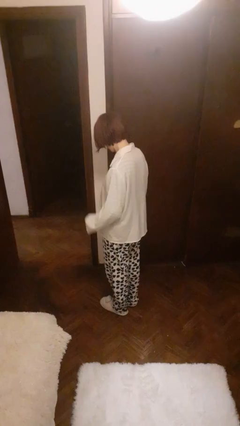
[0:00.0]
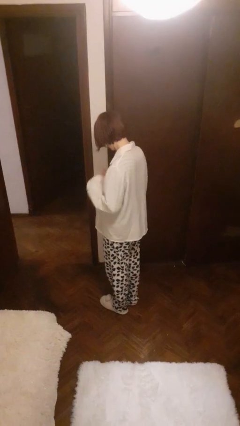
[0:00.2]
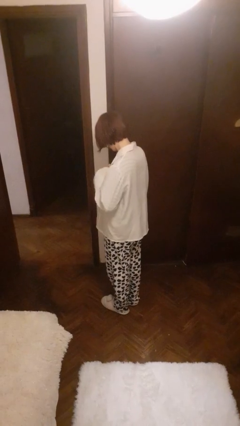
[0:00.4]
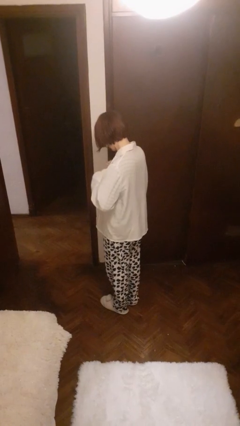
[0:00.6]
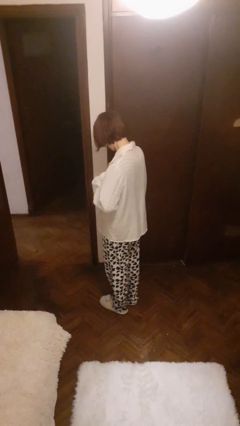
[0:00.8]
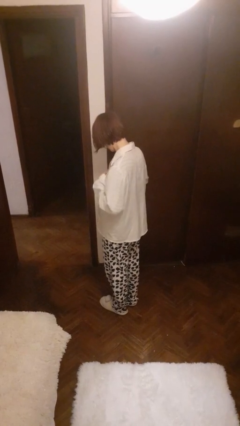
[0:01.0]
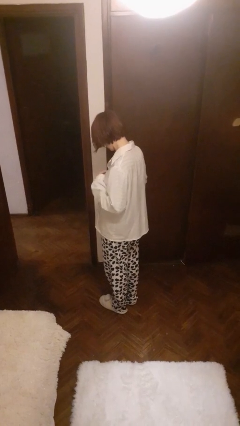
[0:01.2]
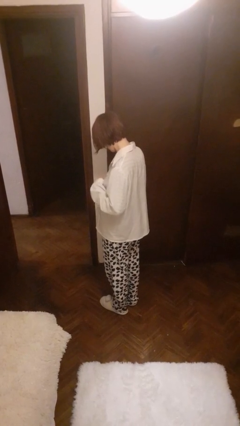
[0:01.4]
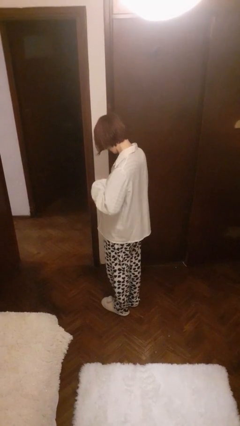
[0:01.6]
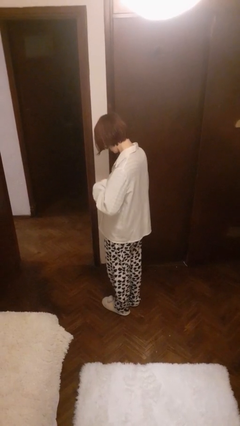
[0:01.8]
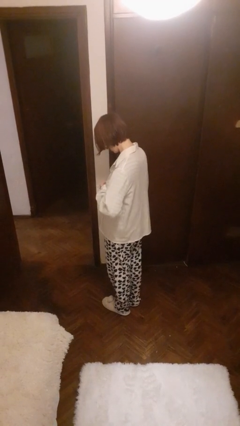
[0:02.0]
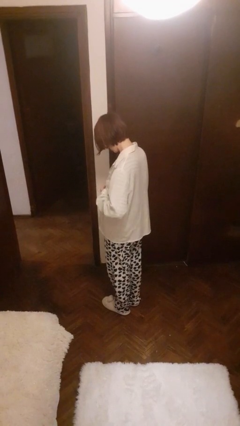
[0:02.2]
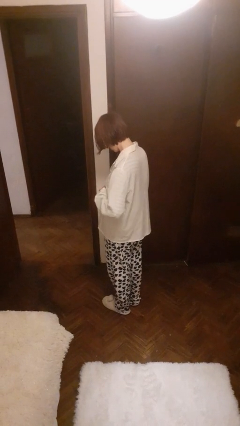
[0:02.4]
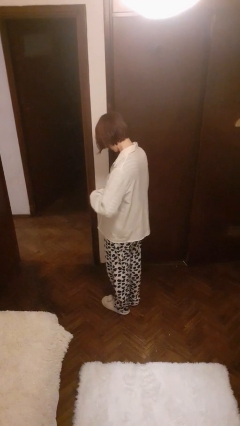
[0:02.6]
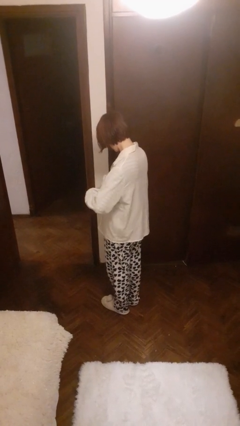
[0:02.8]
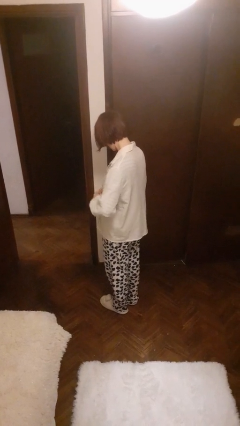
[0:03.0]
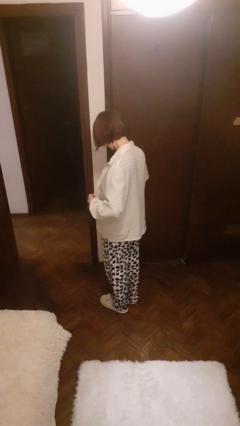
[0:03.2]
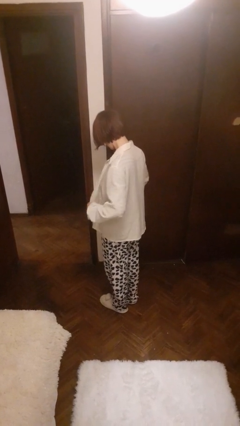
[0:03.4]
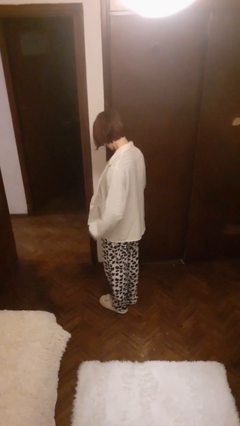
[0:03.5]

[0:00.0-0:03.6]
person unbuttons shirt

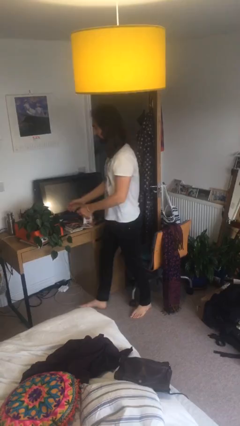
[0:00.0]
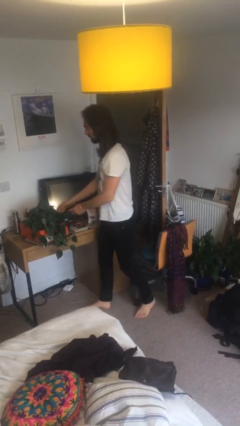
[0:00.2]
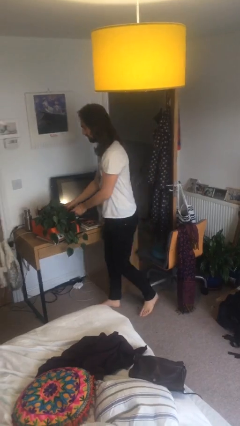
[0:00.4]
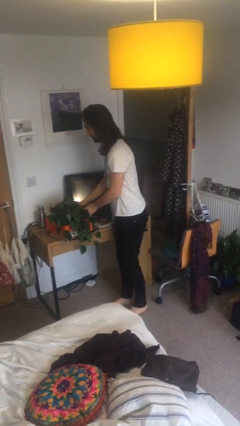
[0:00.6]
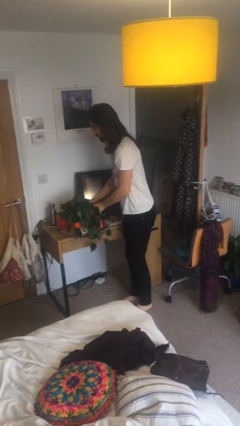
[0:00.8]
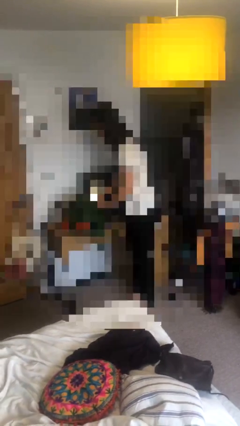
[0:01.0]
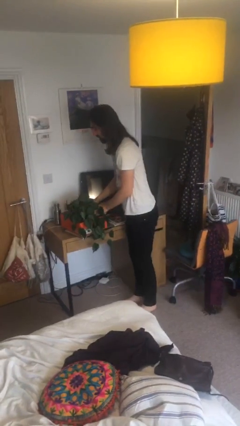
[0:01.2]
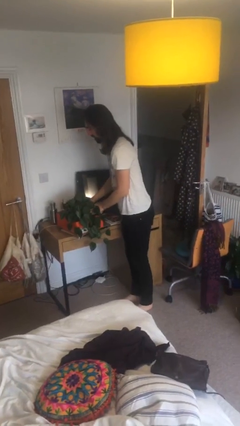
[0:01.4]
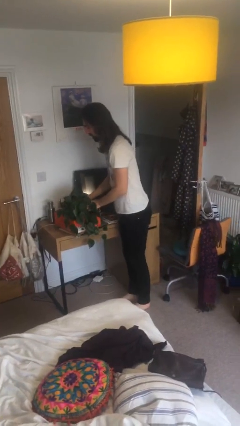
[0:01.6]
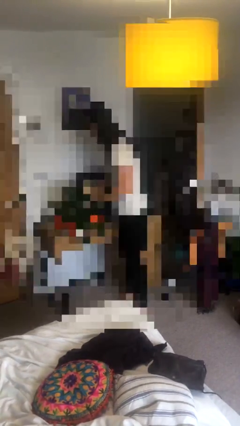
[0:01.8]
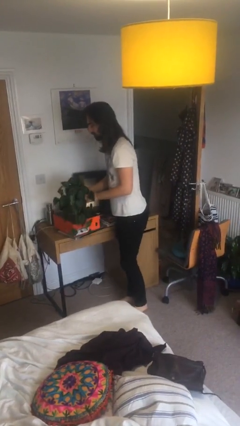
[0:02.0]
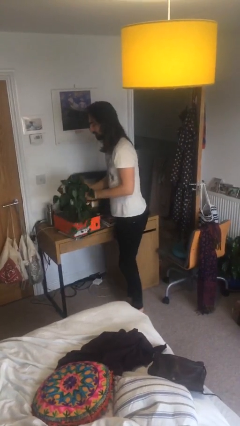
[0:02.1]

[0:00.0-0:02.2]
person picks up object from table

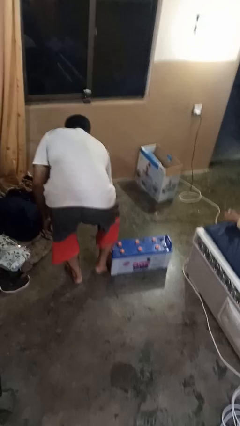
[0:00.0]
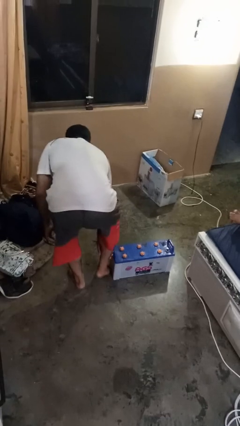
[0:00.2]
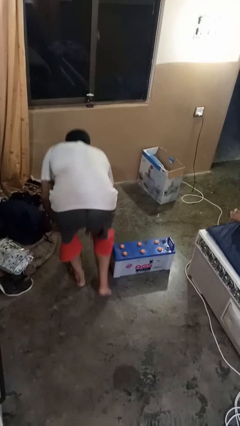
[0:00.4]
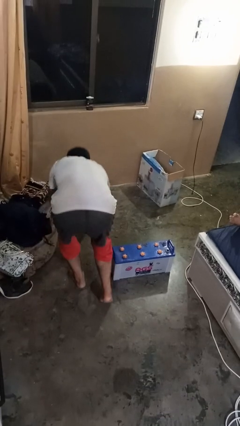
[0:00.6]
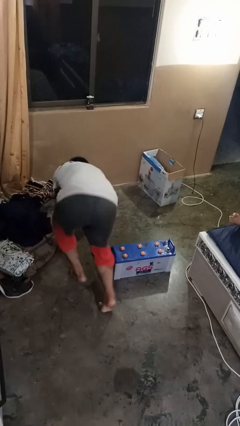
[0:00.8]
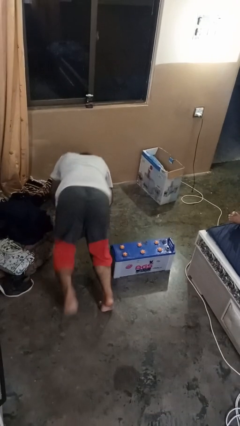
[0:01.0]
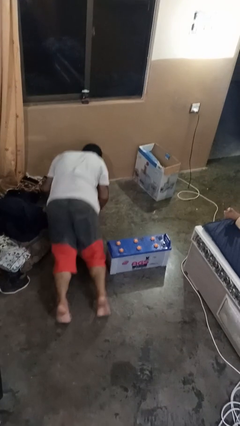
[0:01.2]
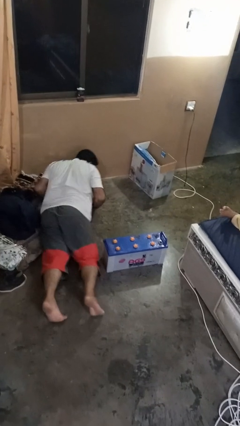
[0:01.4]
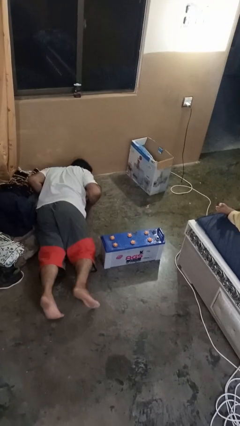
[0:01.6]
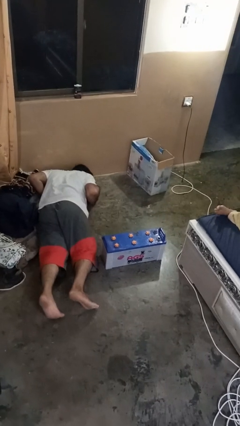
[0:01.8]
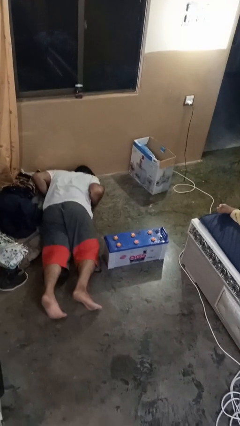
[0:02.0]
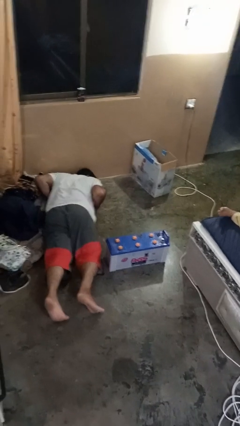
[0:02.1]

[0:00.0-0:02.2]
person lies down on floor

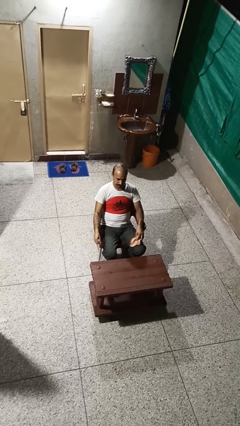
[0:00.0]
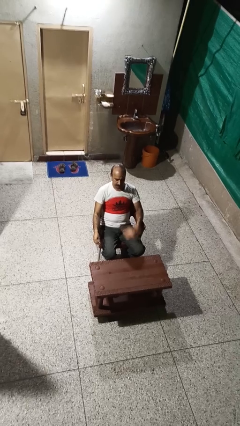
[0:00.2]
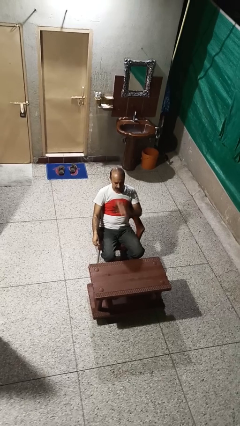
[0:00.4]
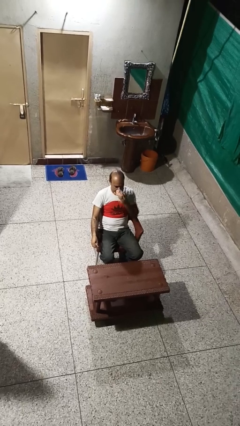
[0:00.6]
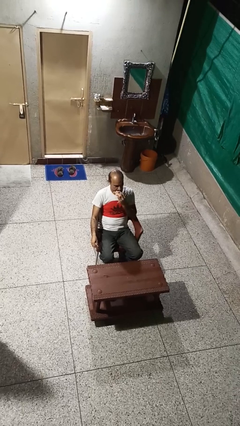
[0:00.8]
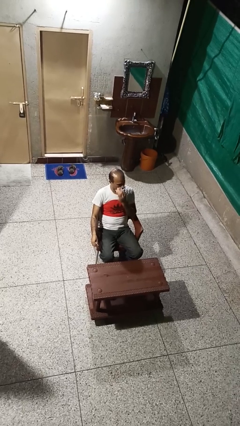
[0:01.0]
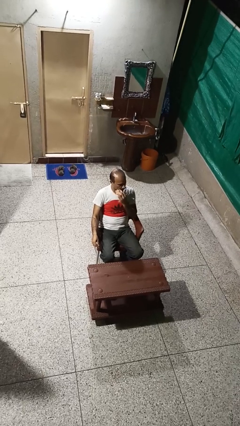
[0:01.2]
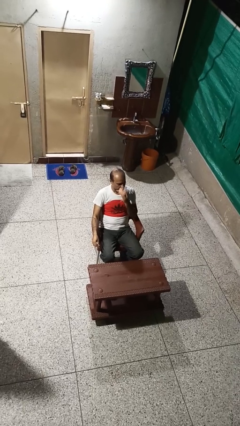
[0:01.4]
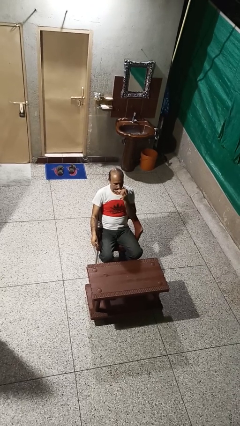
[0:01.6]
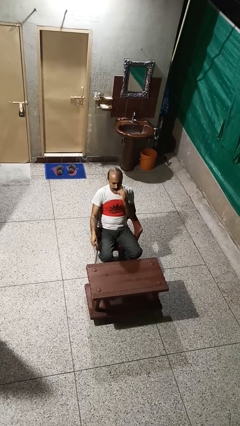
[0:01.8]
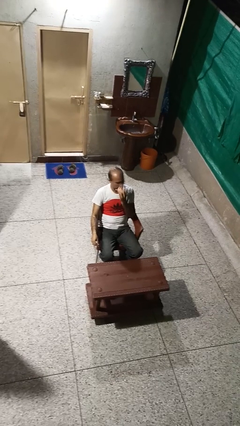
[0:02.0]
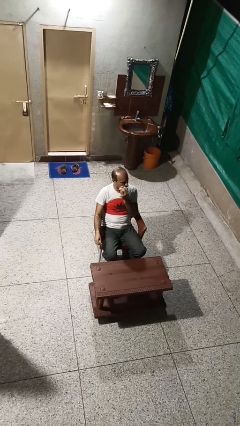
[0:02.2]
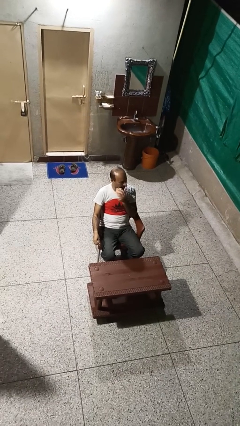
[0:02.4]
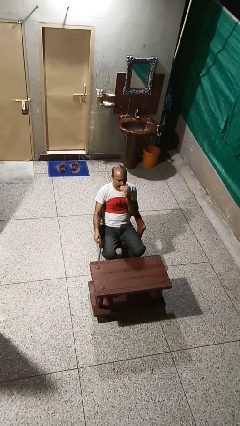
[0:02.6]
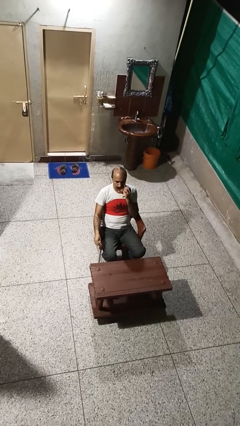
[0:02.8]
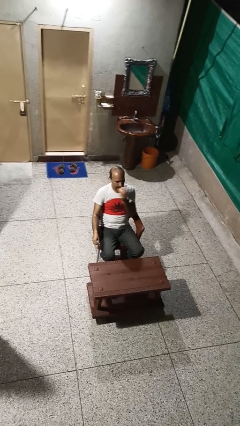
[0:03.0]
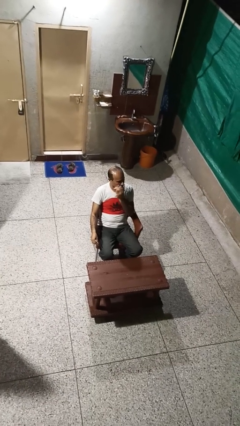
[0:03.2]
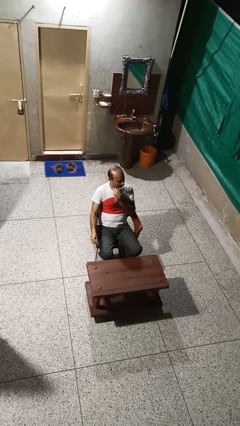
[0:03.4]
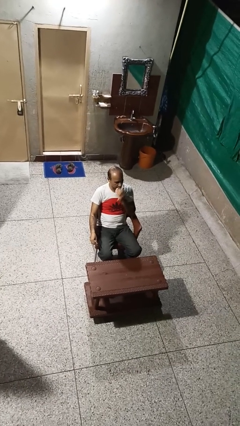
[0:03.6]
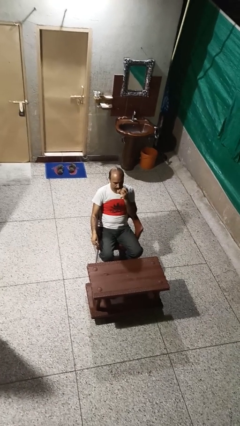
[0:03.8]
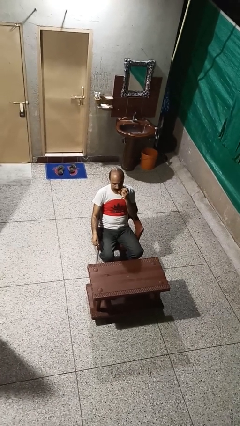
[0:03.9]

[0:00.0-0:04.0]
person wipes mouth with napkin

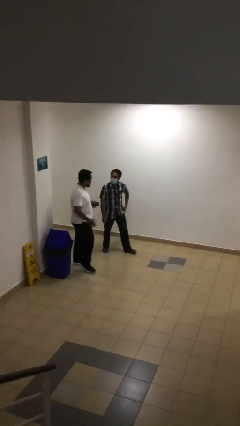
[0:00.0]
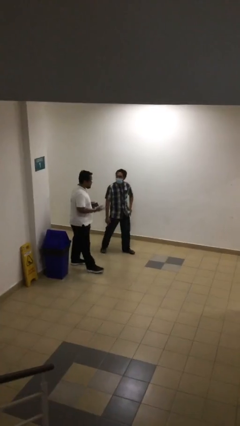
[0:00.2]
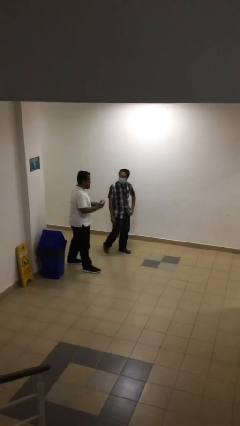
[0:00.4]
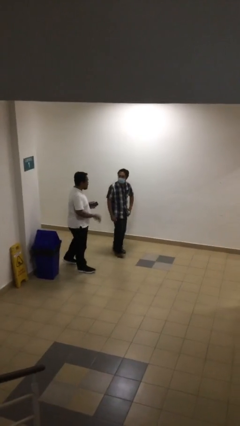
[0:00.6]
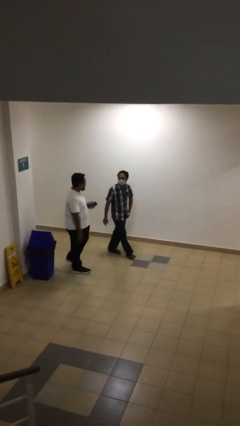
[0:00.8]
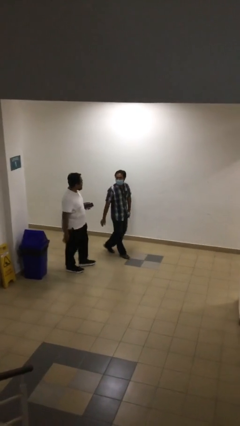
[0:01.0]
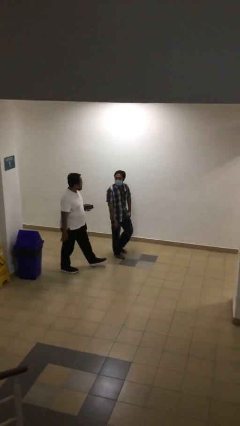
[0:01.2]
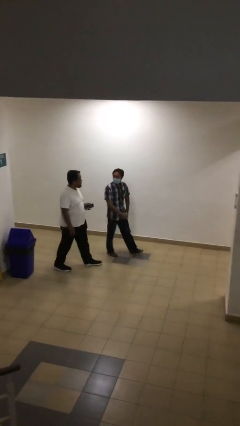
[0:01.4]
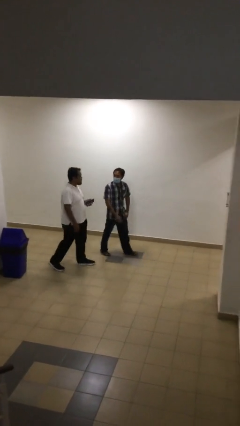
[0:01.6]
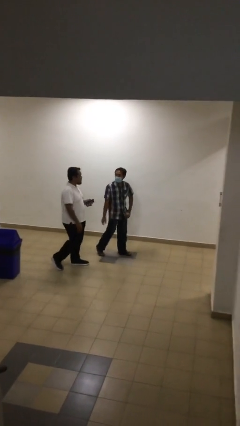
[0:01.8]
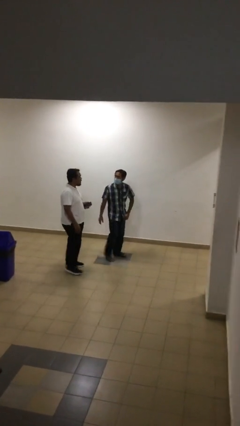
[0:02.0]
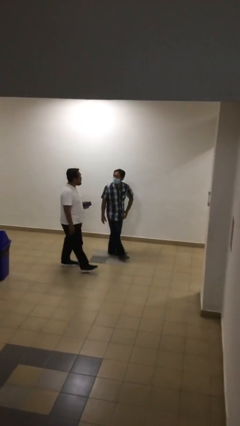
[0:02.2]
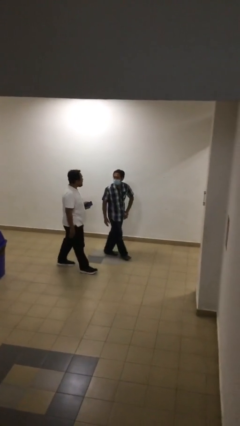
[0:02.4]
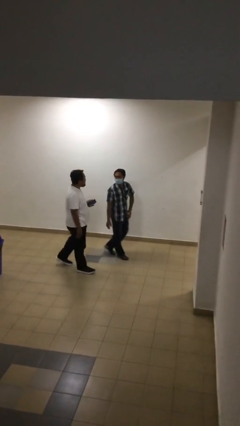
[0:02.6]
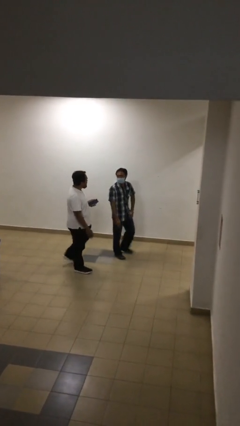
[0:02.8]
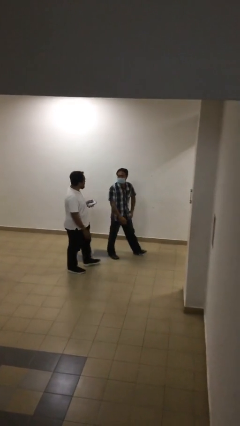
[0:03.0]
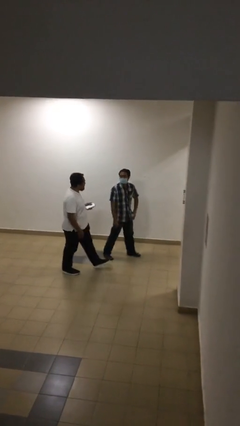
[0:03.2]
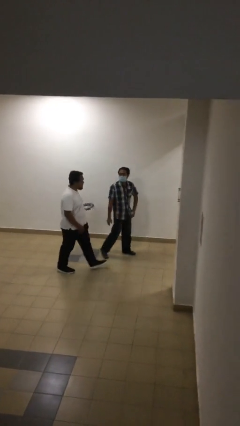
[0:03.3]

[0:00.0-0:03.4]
person talks to person

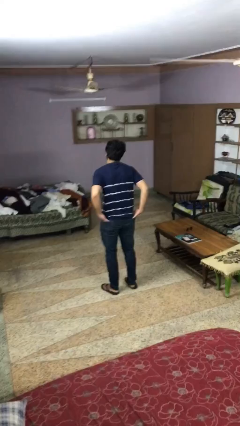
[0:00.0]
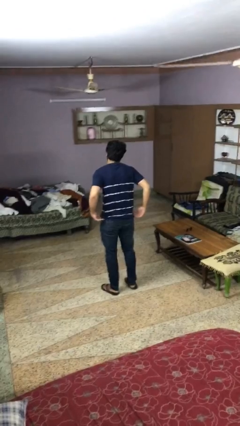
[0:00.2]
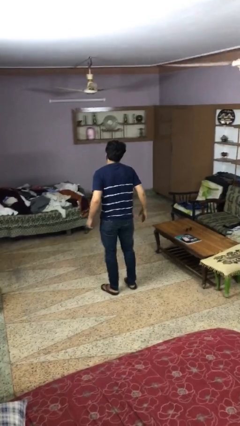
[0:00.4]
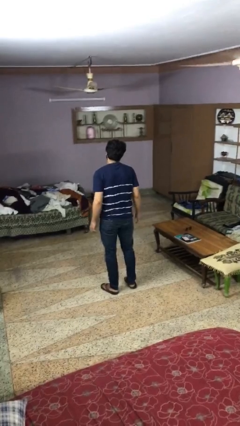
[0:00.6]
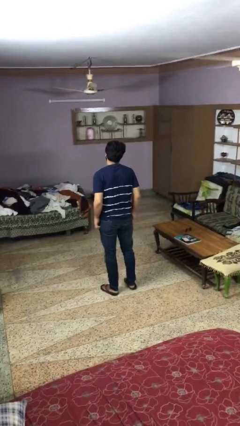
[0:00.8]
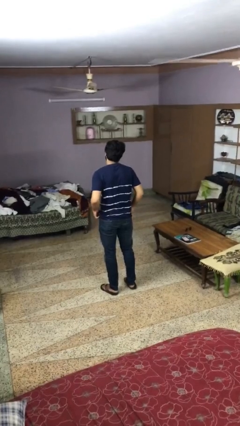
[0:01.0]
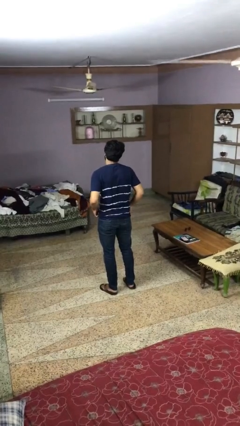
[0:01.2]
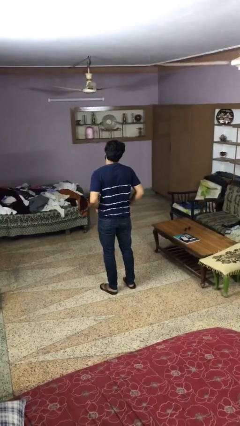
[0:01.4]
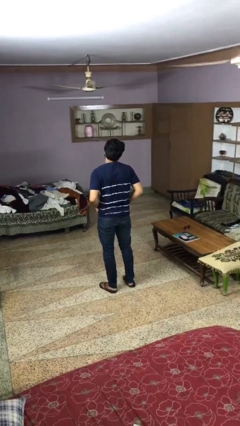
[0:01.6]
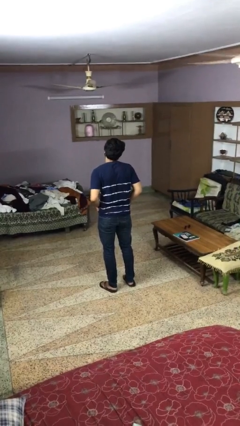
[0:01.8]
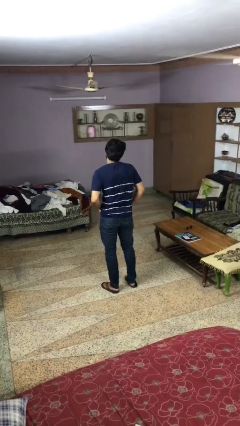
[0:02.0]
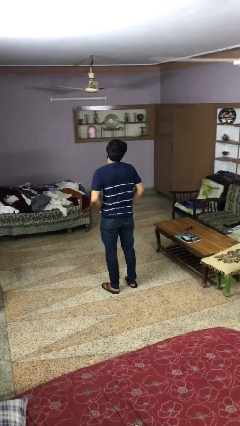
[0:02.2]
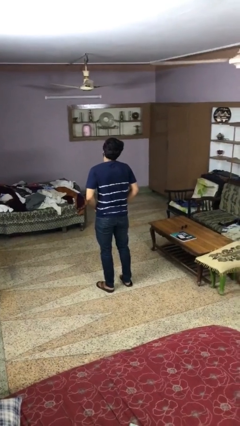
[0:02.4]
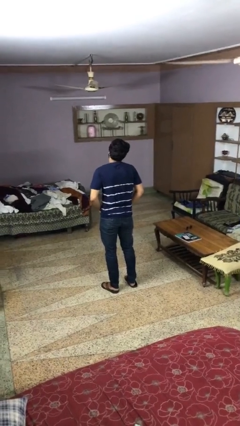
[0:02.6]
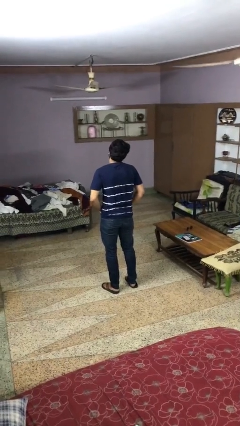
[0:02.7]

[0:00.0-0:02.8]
person puts hands in back pockets
